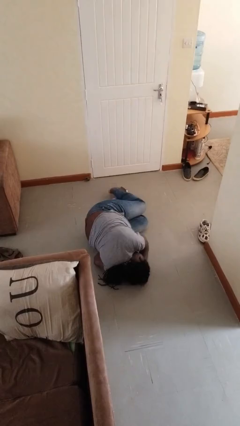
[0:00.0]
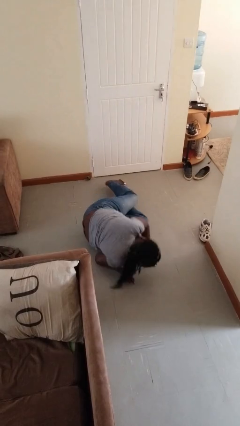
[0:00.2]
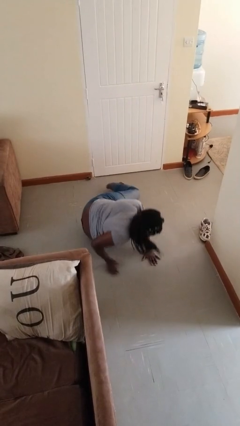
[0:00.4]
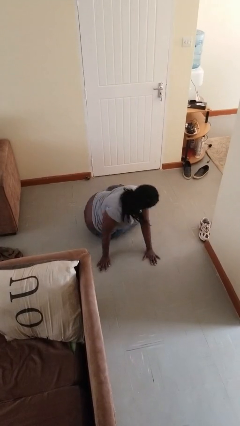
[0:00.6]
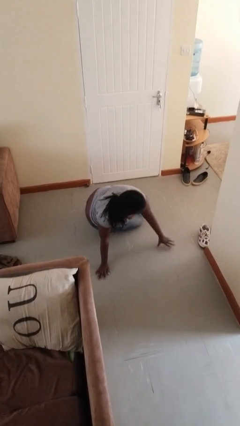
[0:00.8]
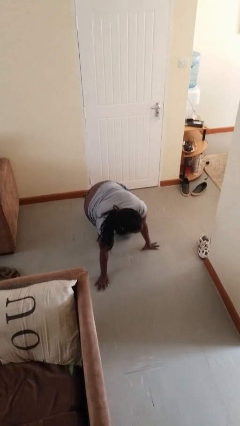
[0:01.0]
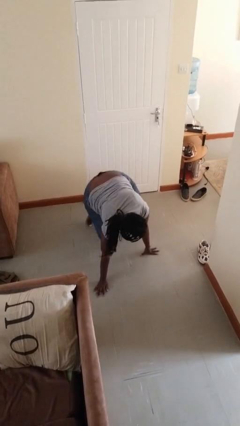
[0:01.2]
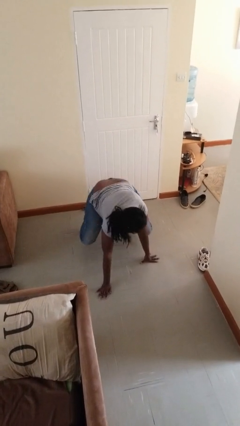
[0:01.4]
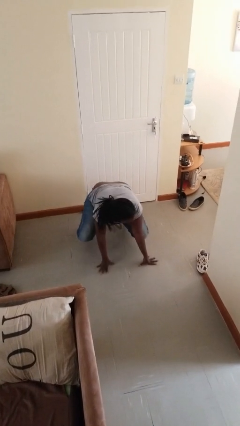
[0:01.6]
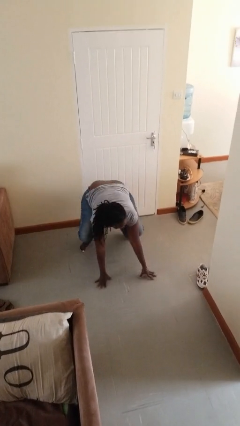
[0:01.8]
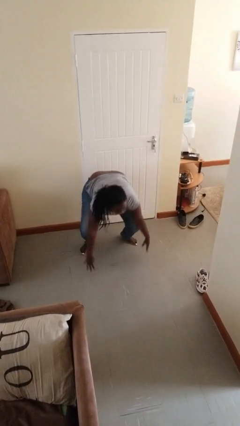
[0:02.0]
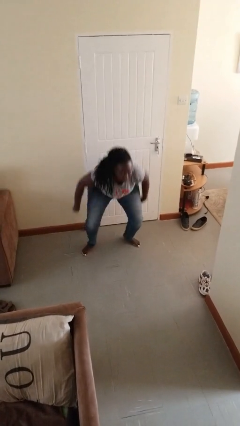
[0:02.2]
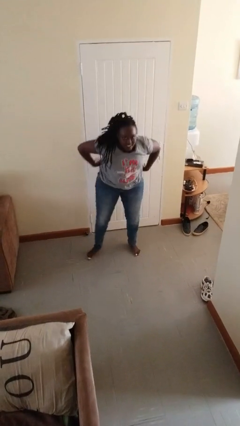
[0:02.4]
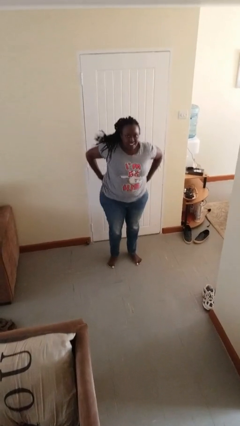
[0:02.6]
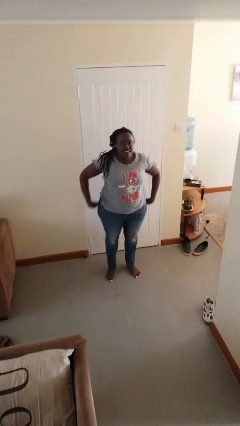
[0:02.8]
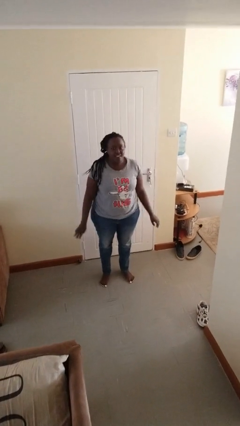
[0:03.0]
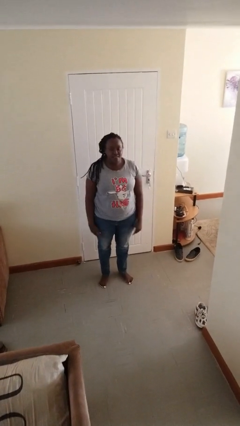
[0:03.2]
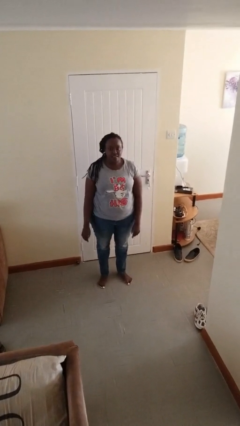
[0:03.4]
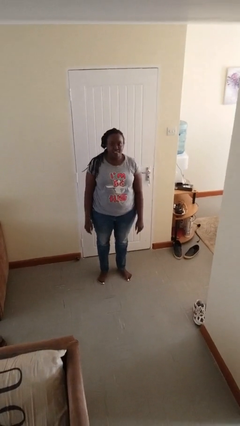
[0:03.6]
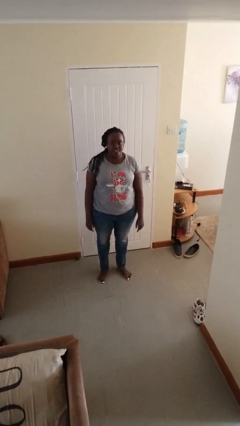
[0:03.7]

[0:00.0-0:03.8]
person stands up from floor

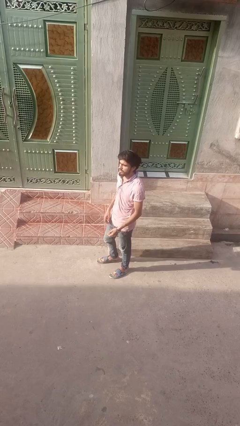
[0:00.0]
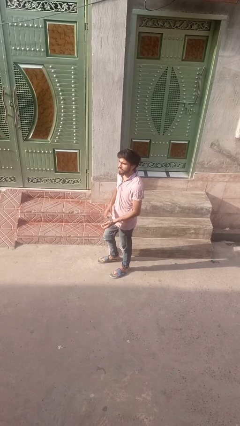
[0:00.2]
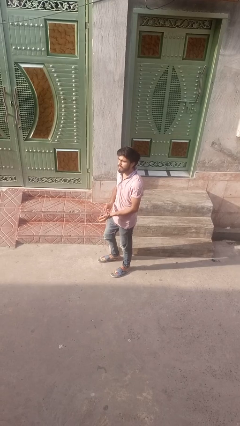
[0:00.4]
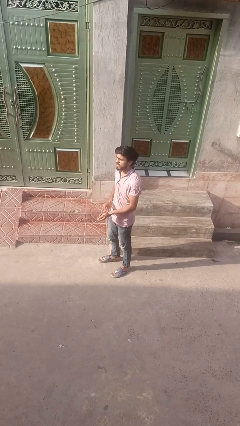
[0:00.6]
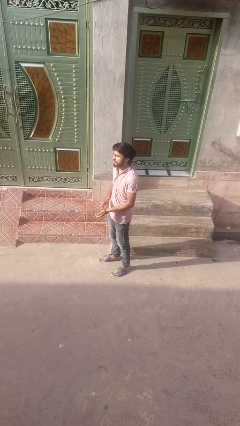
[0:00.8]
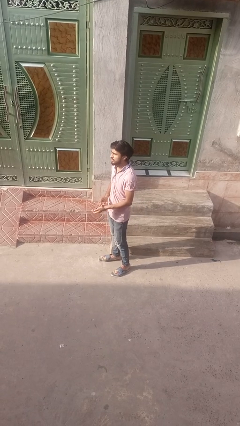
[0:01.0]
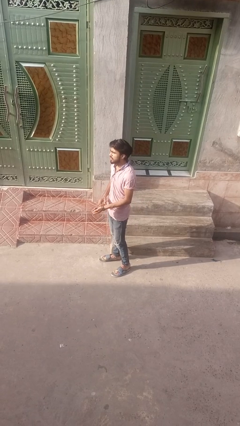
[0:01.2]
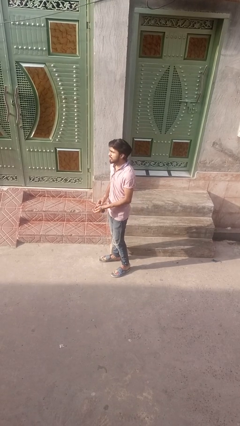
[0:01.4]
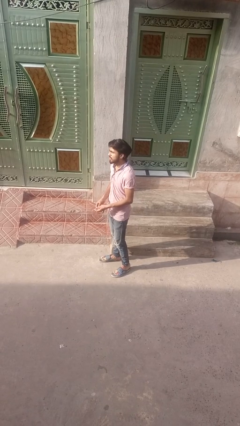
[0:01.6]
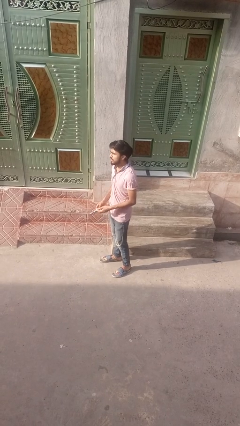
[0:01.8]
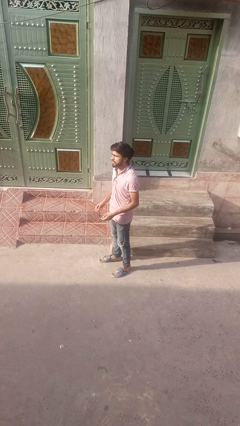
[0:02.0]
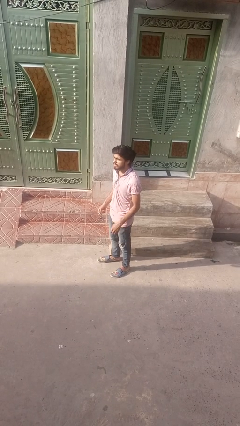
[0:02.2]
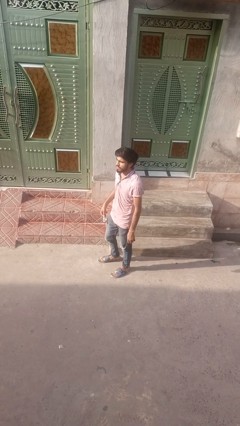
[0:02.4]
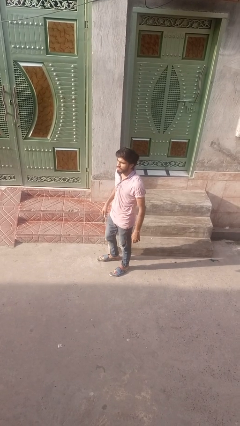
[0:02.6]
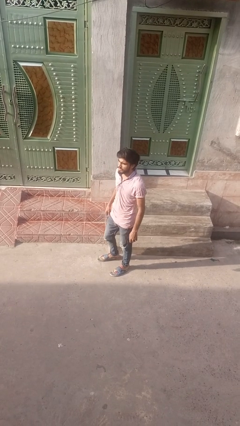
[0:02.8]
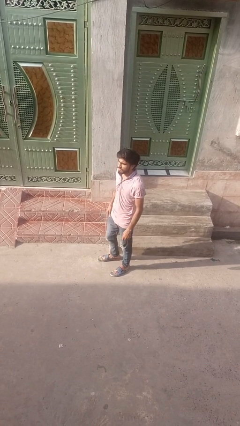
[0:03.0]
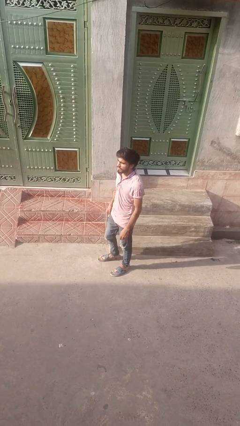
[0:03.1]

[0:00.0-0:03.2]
person takes off wristwatch

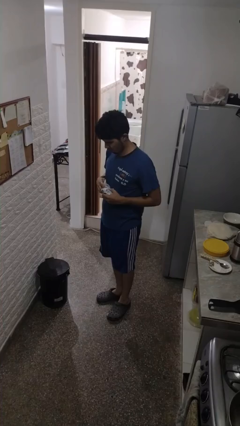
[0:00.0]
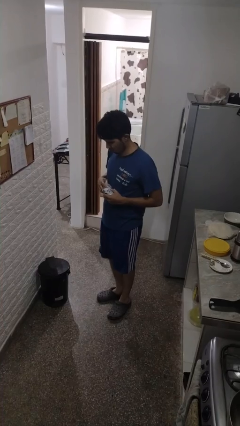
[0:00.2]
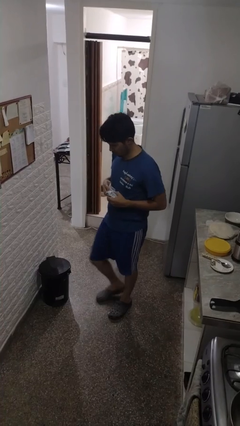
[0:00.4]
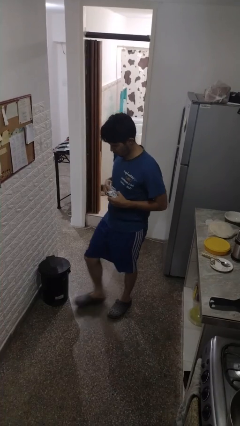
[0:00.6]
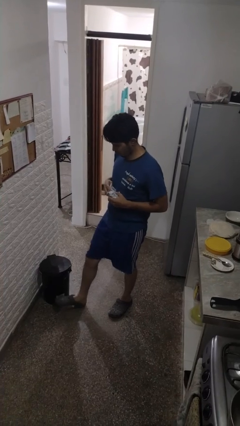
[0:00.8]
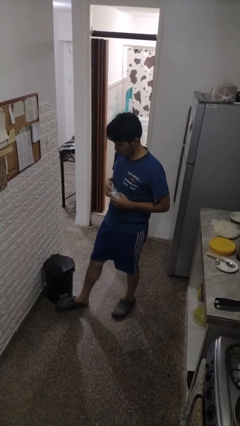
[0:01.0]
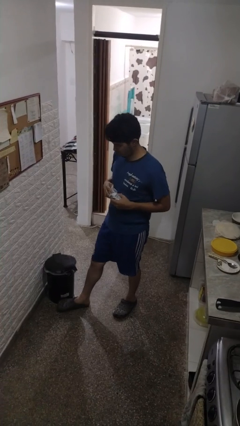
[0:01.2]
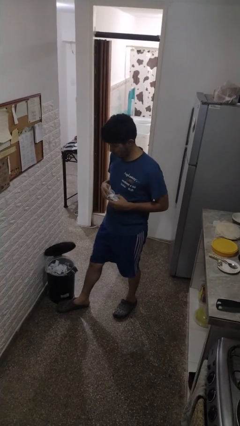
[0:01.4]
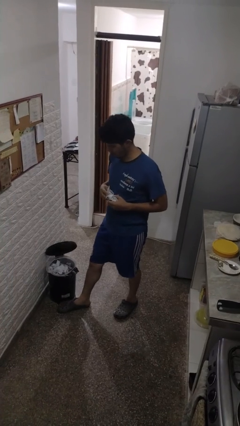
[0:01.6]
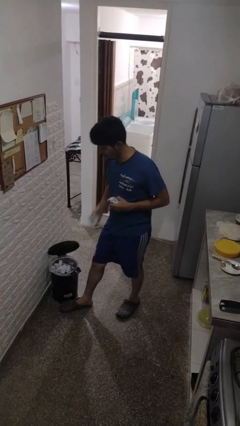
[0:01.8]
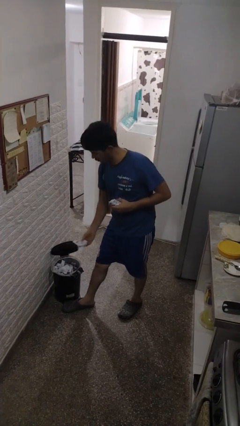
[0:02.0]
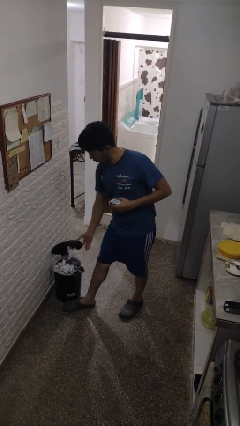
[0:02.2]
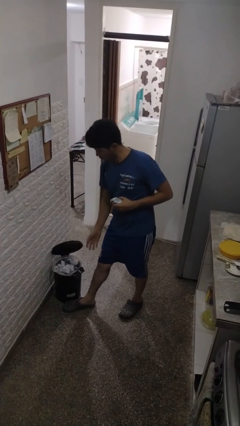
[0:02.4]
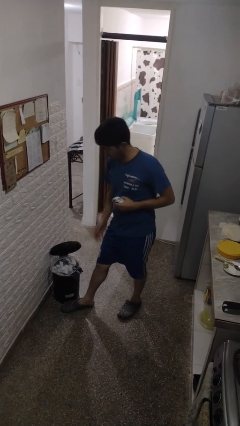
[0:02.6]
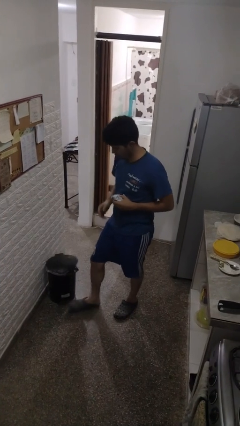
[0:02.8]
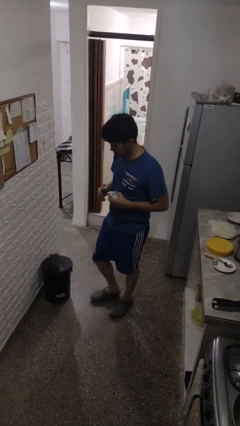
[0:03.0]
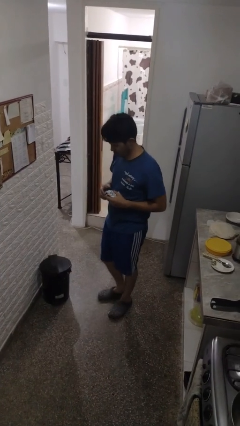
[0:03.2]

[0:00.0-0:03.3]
person discards trash

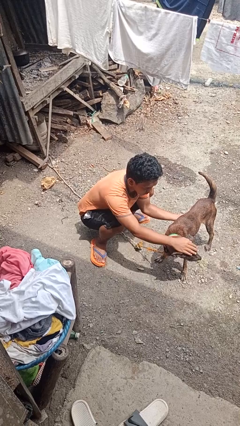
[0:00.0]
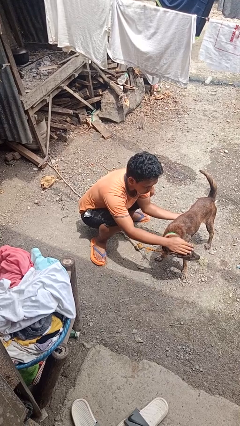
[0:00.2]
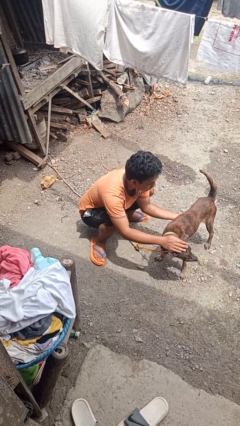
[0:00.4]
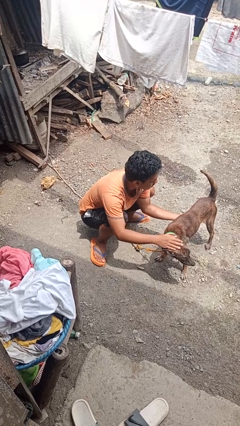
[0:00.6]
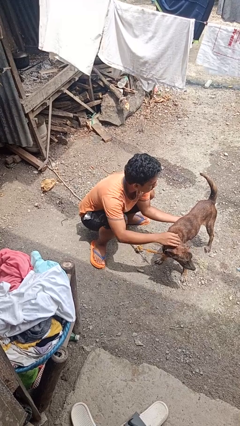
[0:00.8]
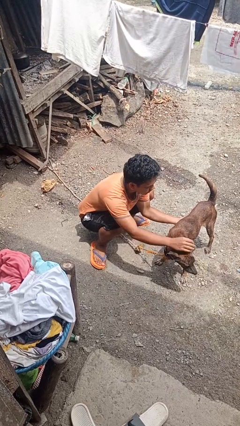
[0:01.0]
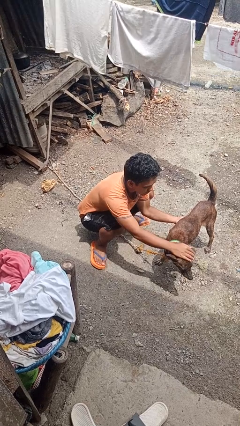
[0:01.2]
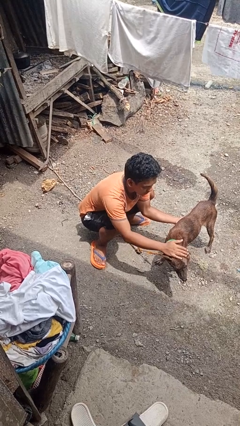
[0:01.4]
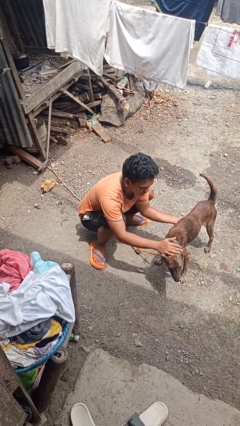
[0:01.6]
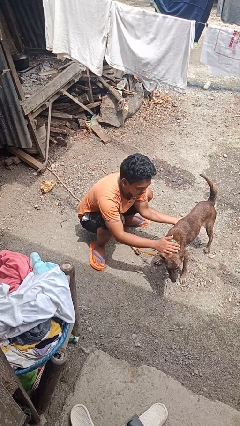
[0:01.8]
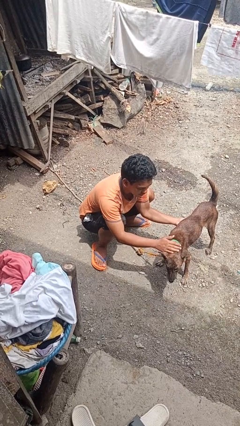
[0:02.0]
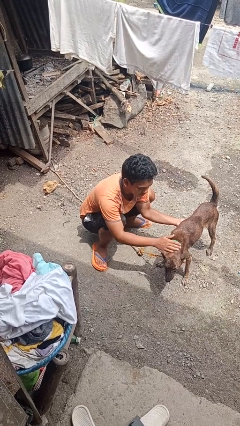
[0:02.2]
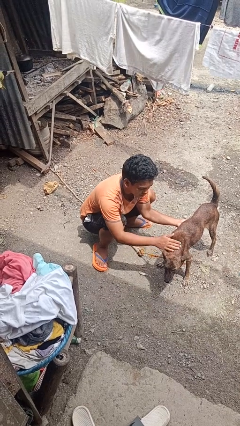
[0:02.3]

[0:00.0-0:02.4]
person pets dog

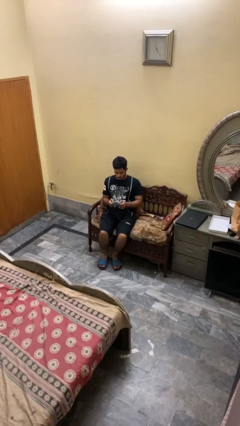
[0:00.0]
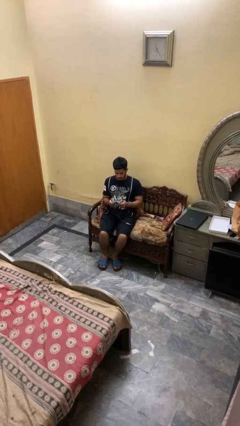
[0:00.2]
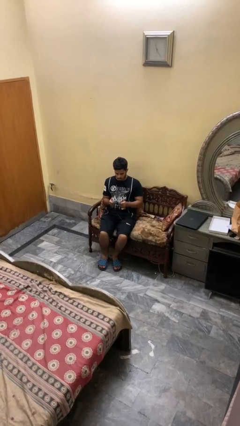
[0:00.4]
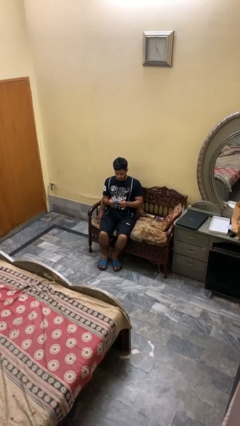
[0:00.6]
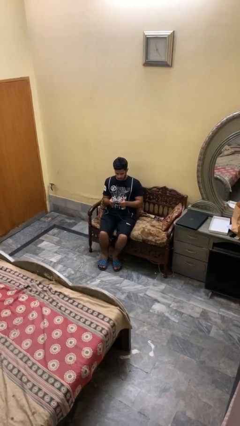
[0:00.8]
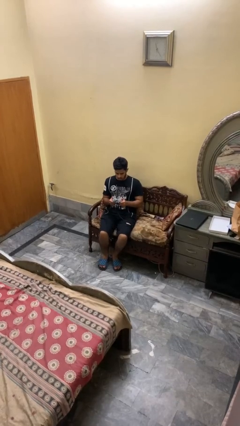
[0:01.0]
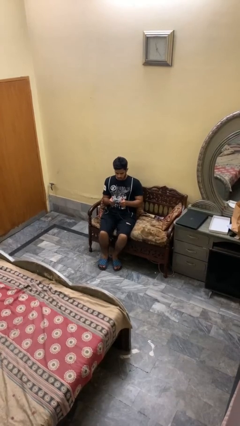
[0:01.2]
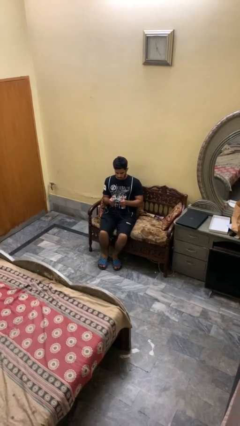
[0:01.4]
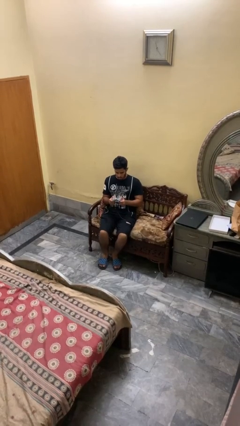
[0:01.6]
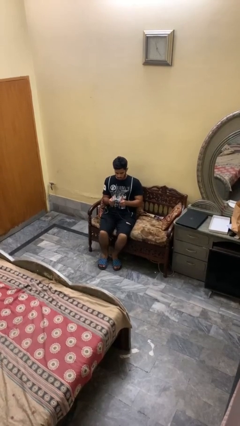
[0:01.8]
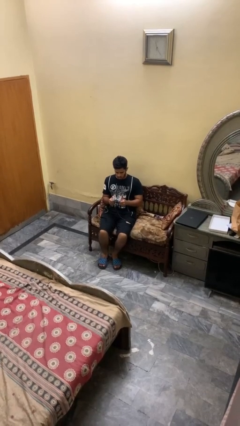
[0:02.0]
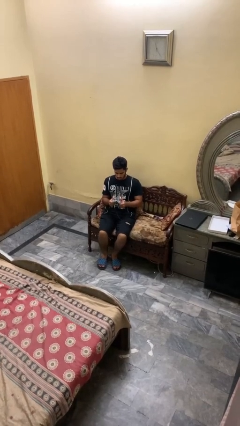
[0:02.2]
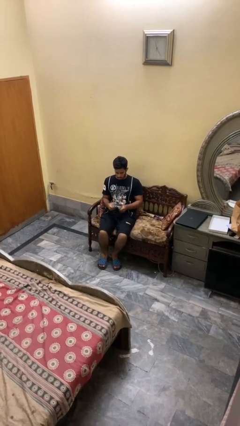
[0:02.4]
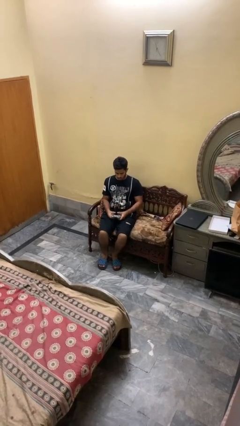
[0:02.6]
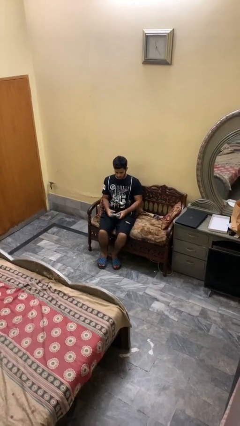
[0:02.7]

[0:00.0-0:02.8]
person interacts with handheld game

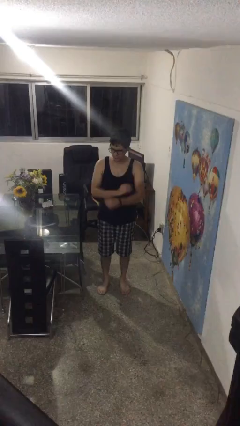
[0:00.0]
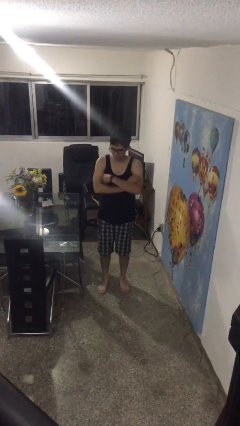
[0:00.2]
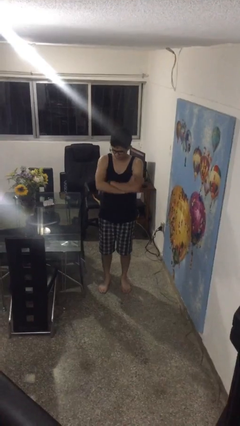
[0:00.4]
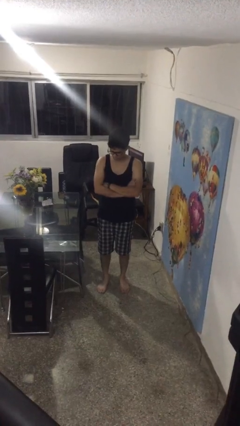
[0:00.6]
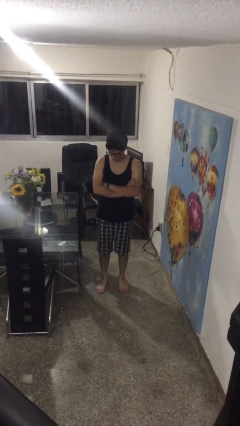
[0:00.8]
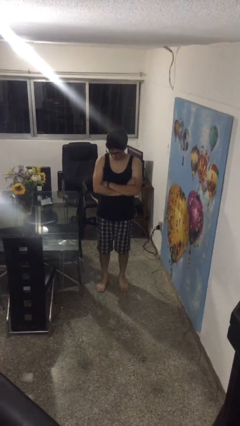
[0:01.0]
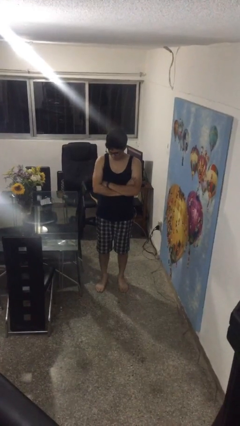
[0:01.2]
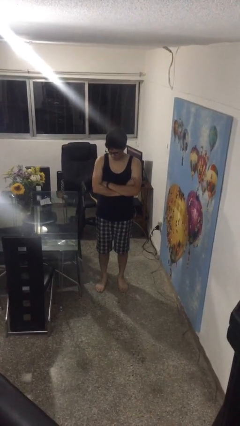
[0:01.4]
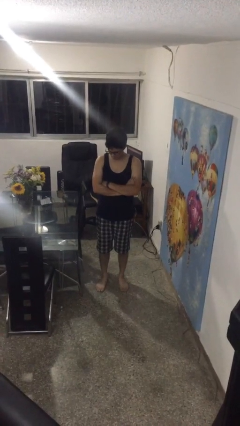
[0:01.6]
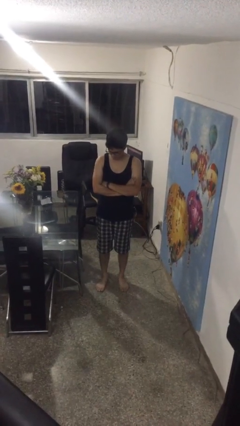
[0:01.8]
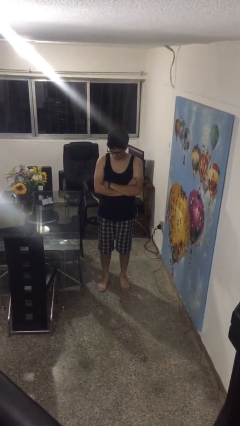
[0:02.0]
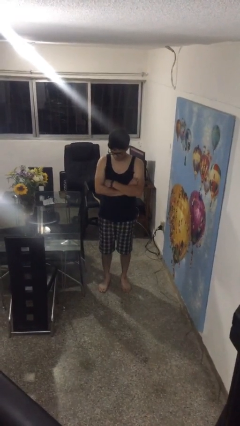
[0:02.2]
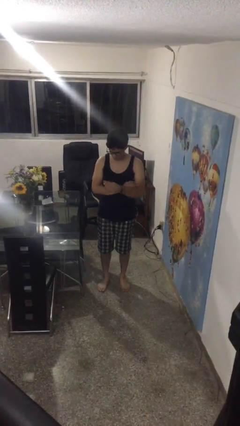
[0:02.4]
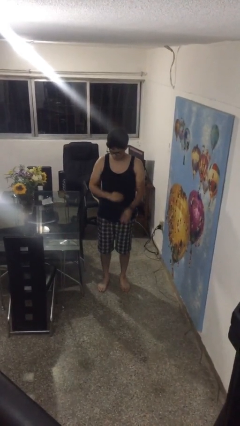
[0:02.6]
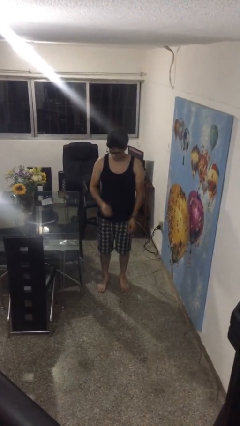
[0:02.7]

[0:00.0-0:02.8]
person crosses arms
